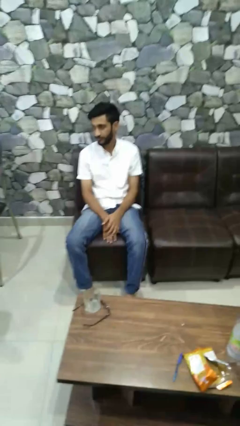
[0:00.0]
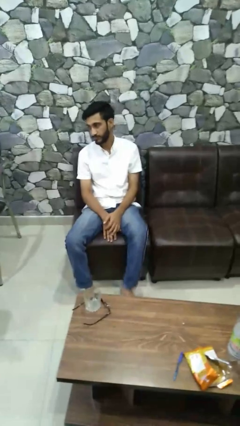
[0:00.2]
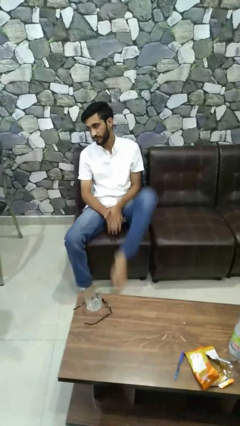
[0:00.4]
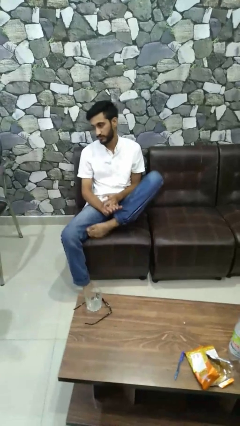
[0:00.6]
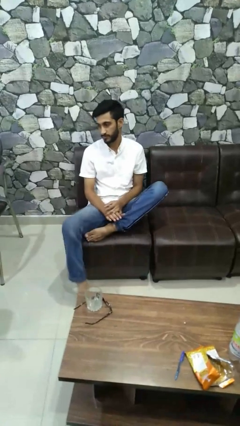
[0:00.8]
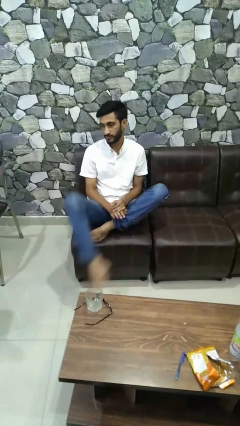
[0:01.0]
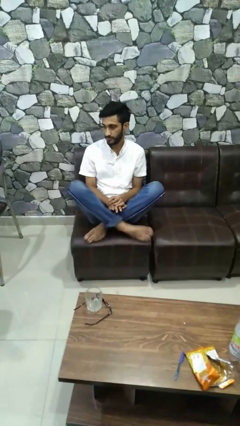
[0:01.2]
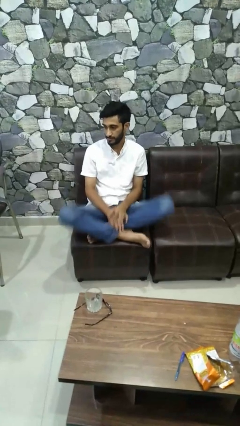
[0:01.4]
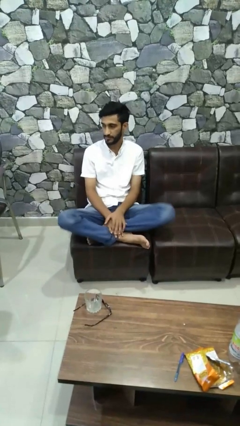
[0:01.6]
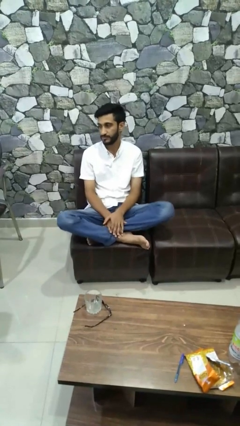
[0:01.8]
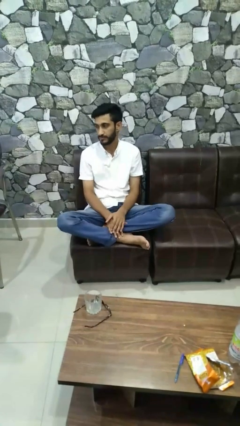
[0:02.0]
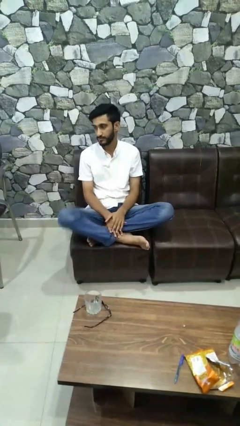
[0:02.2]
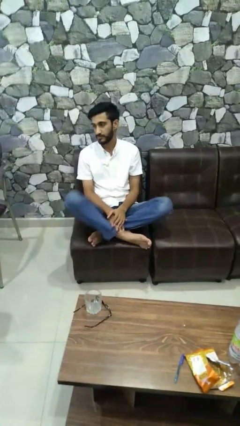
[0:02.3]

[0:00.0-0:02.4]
person crosses legs

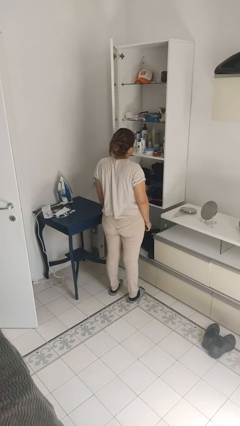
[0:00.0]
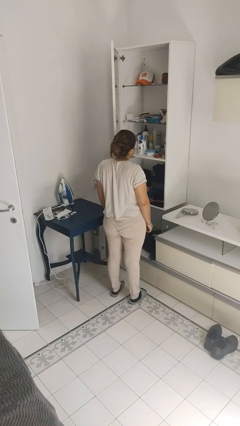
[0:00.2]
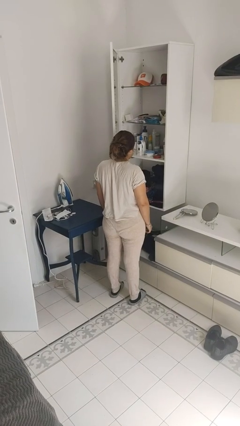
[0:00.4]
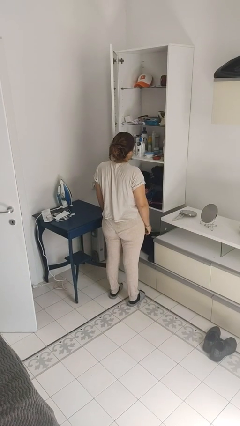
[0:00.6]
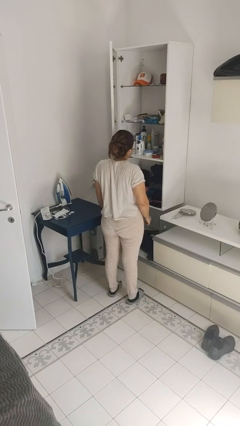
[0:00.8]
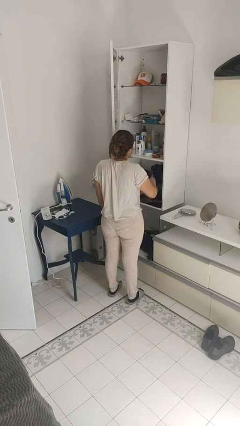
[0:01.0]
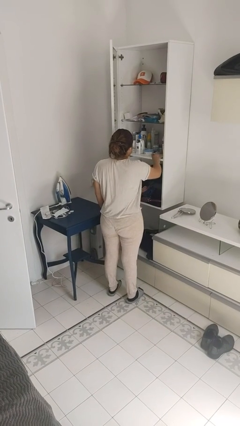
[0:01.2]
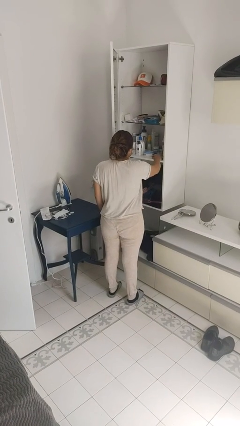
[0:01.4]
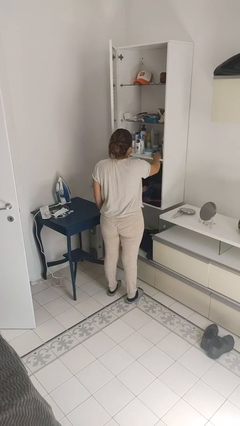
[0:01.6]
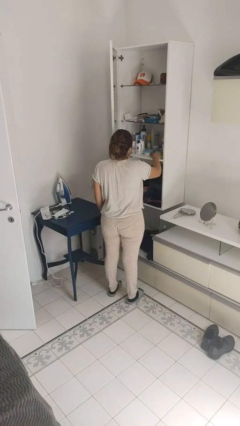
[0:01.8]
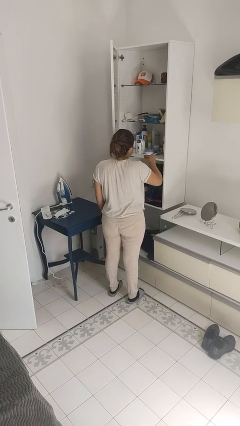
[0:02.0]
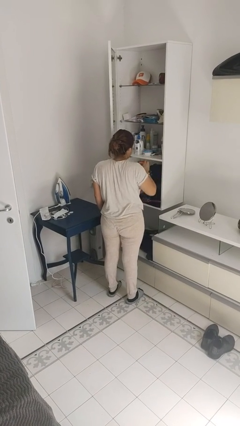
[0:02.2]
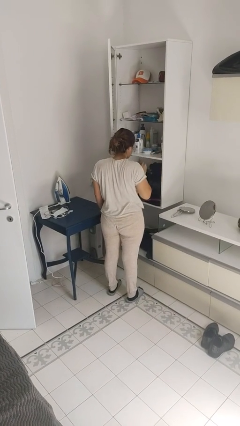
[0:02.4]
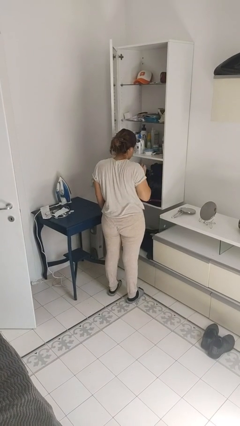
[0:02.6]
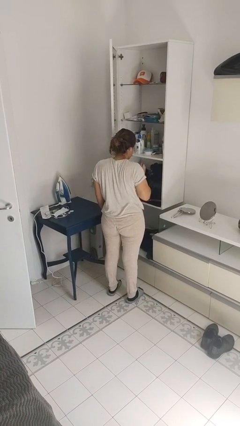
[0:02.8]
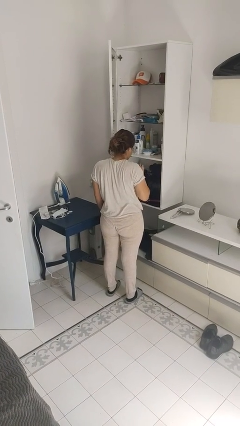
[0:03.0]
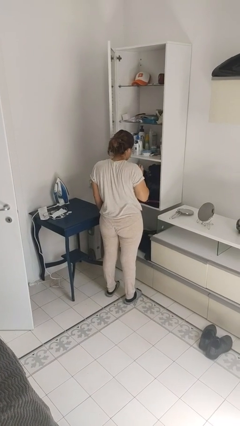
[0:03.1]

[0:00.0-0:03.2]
person picks up object from shelf

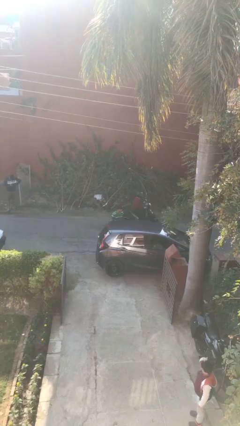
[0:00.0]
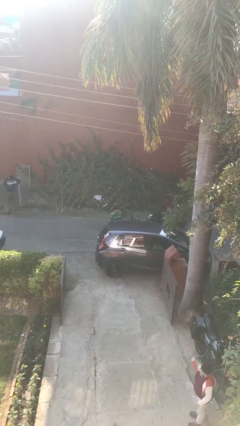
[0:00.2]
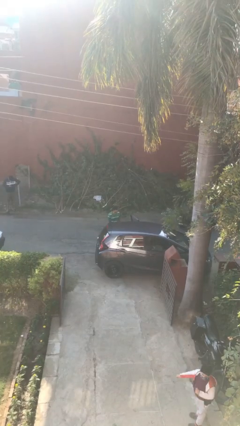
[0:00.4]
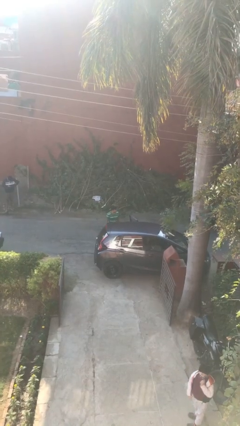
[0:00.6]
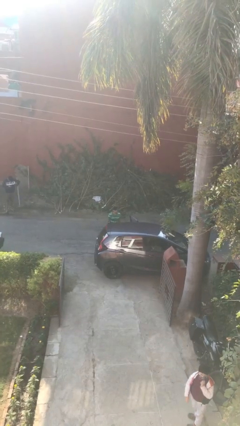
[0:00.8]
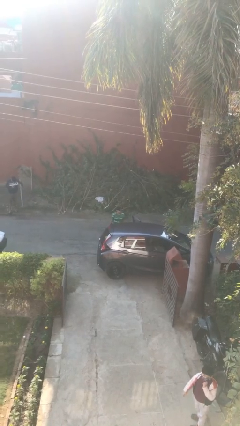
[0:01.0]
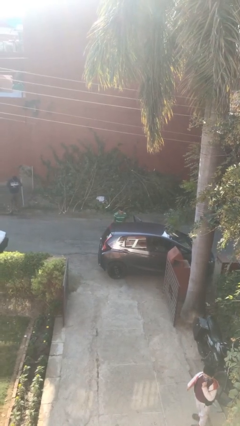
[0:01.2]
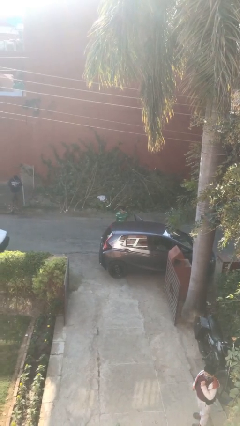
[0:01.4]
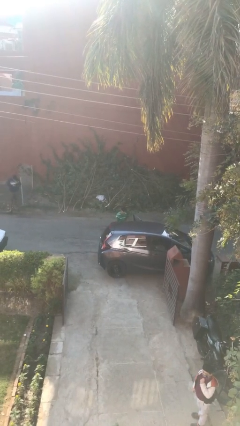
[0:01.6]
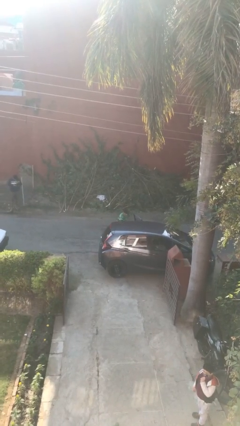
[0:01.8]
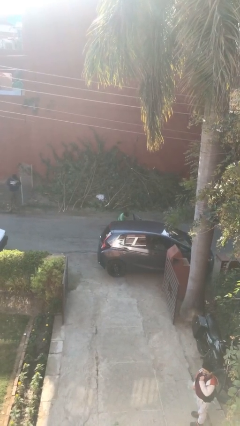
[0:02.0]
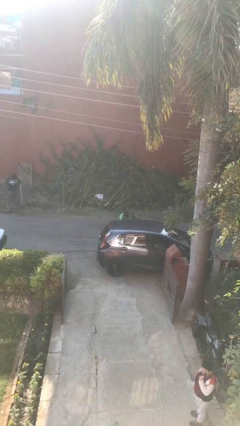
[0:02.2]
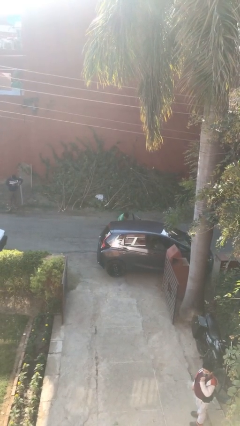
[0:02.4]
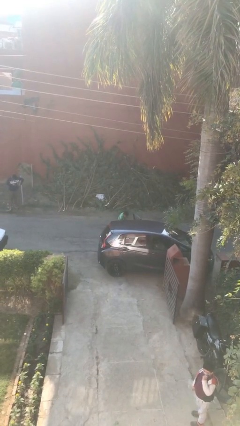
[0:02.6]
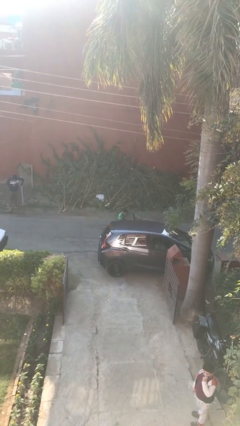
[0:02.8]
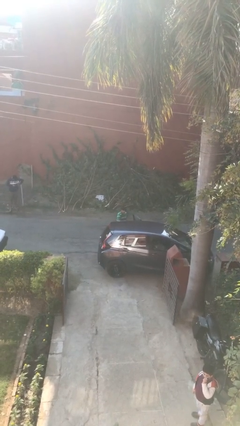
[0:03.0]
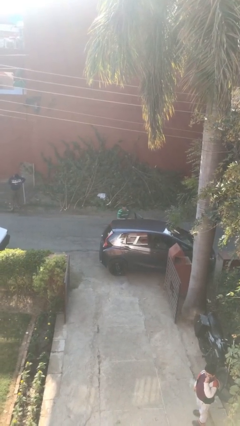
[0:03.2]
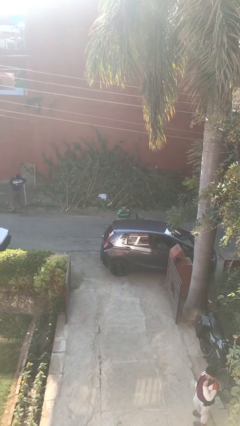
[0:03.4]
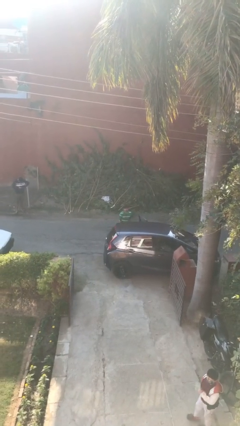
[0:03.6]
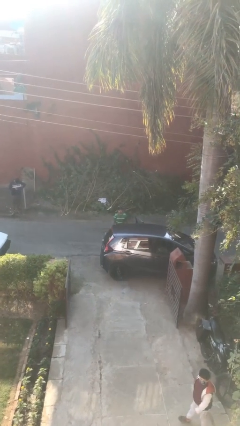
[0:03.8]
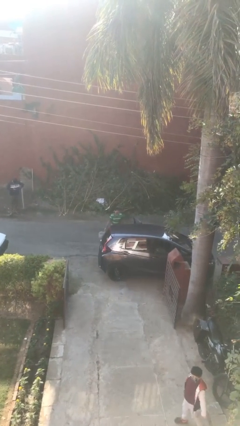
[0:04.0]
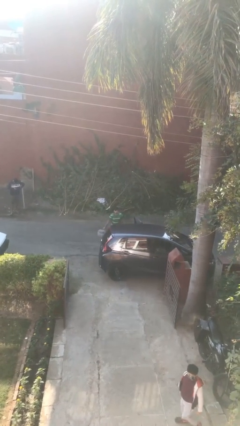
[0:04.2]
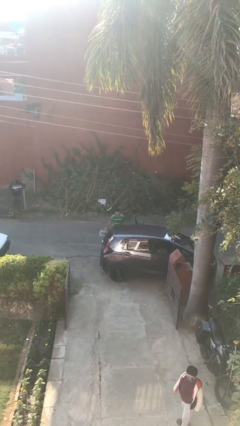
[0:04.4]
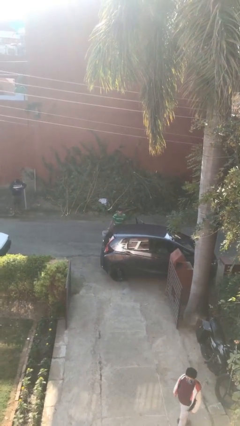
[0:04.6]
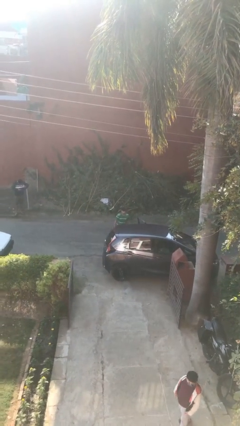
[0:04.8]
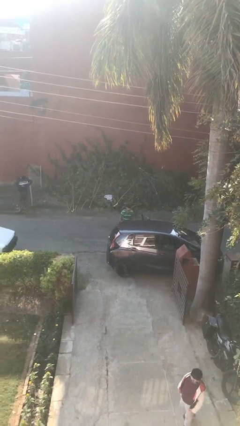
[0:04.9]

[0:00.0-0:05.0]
person unloads car

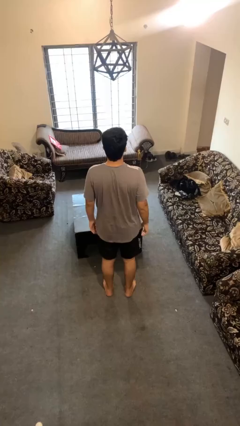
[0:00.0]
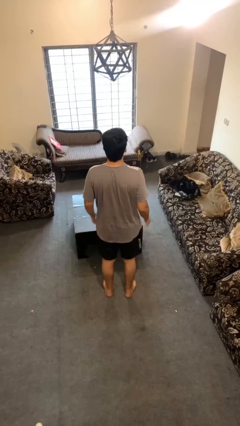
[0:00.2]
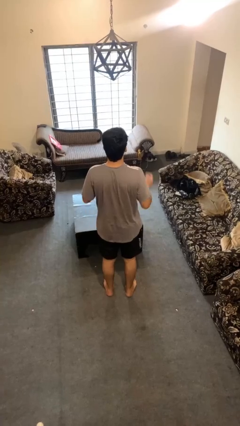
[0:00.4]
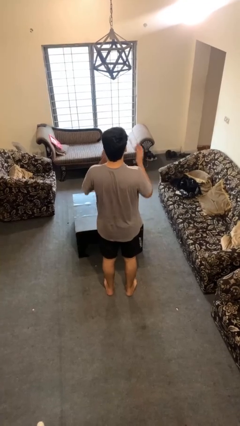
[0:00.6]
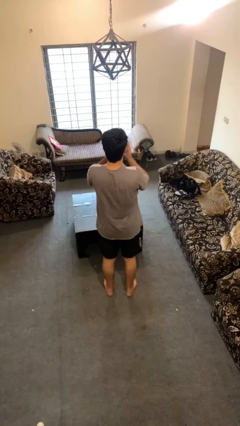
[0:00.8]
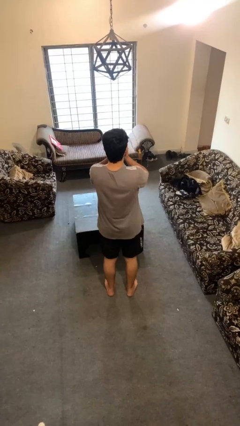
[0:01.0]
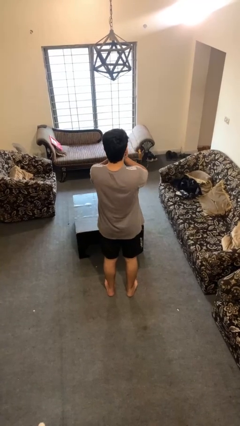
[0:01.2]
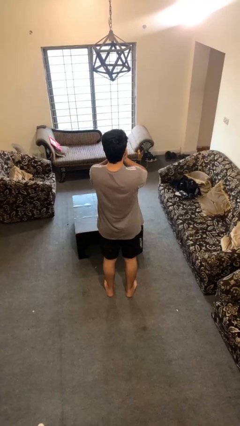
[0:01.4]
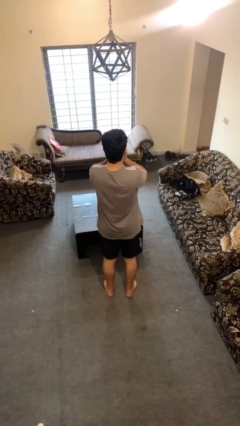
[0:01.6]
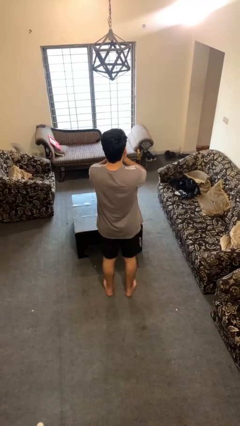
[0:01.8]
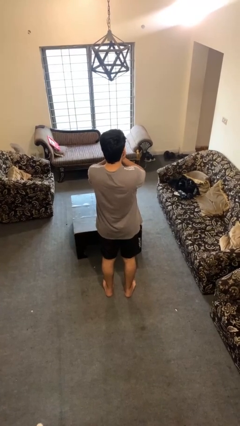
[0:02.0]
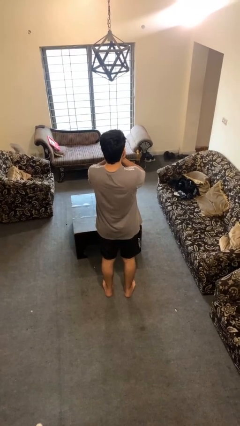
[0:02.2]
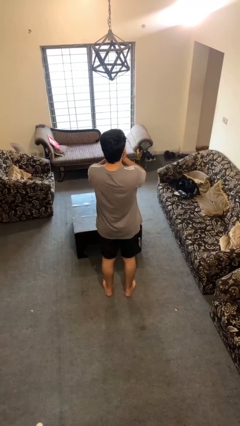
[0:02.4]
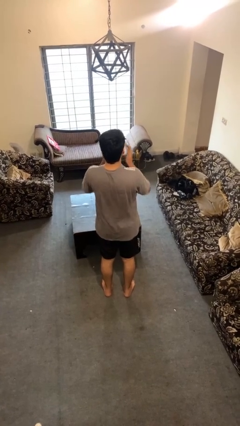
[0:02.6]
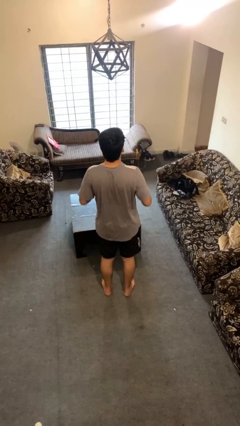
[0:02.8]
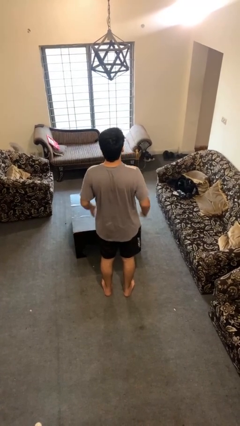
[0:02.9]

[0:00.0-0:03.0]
person covers face with hands

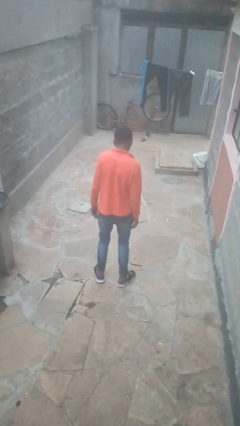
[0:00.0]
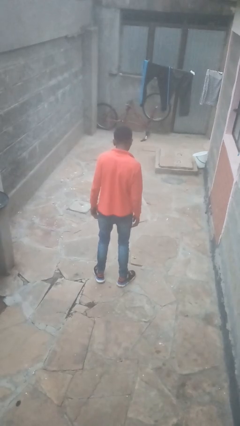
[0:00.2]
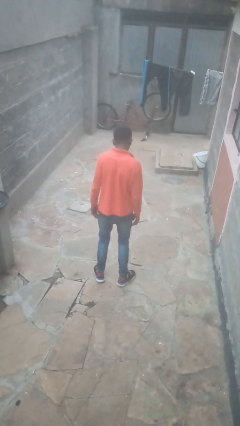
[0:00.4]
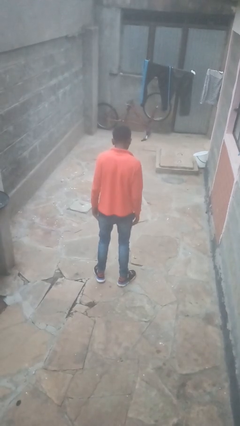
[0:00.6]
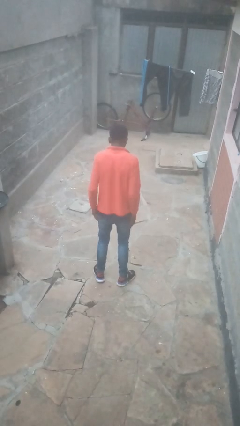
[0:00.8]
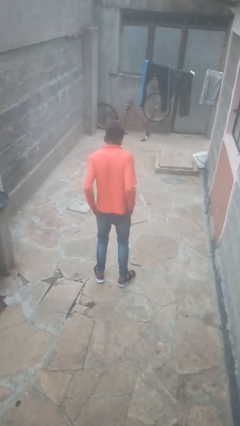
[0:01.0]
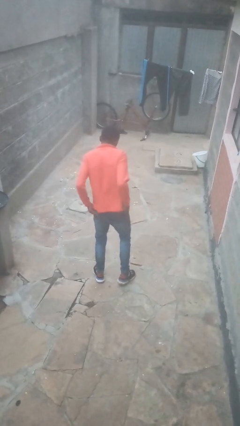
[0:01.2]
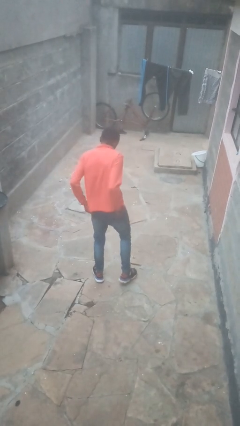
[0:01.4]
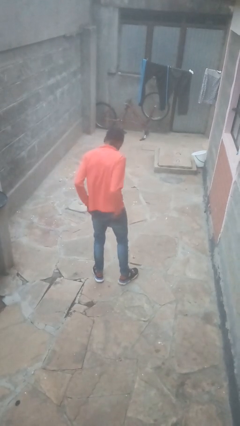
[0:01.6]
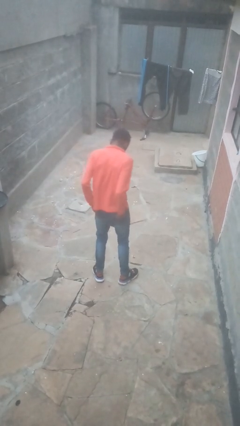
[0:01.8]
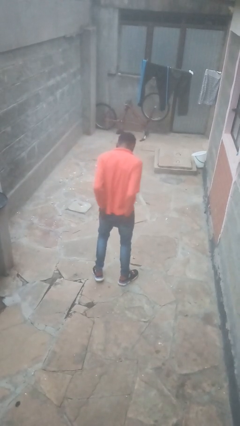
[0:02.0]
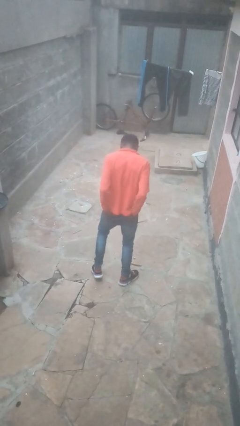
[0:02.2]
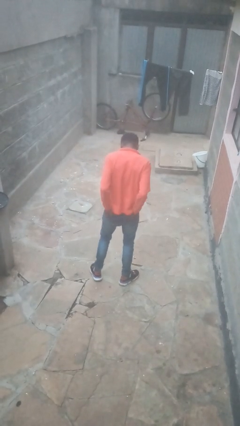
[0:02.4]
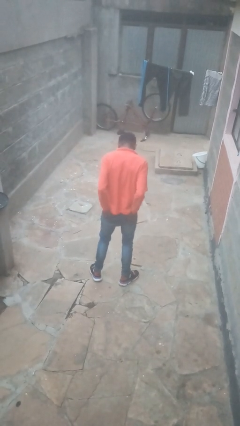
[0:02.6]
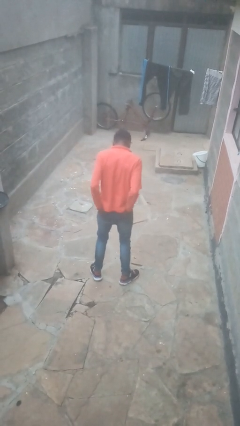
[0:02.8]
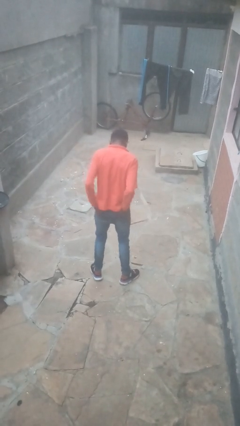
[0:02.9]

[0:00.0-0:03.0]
person puts hands in back pockets

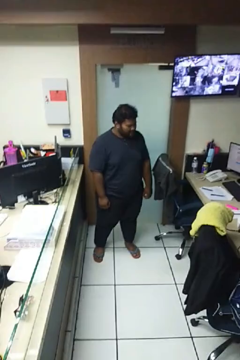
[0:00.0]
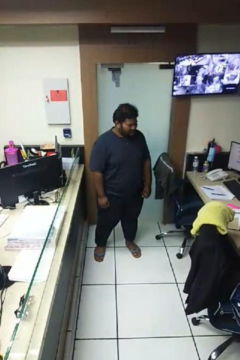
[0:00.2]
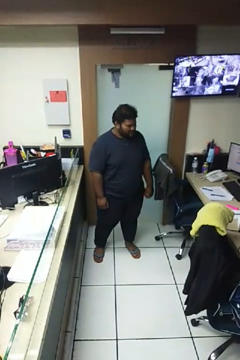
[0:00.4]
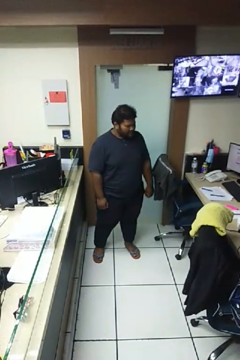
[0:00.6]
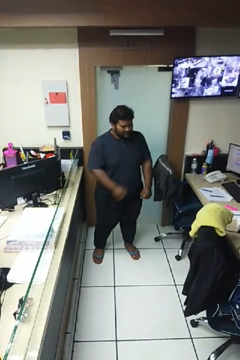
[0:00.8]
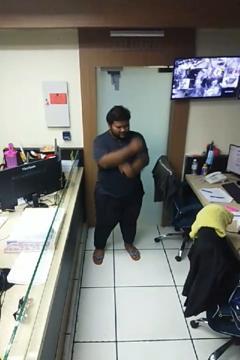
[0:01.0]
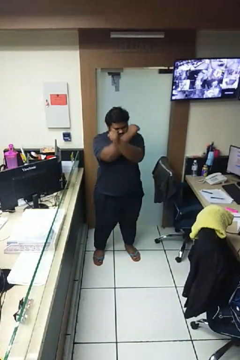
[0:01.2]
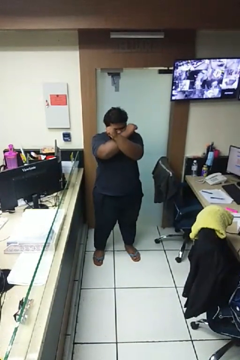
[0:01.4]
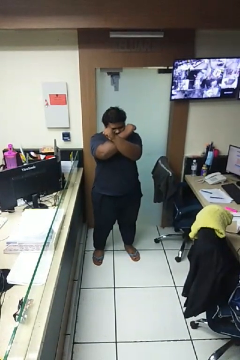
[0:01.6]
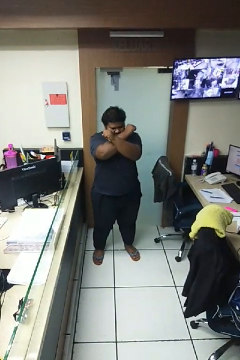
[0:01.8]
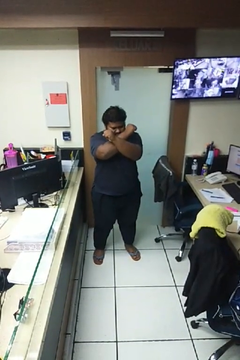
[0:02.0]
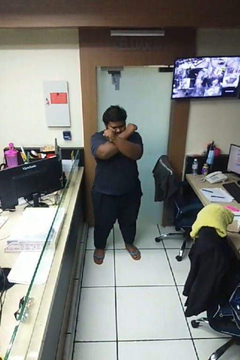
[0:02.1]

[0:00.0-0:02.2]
person gestures arms x
